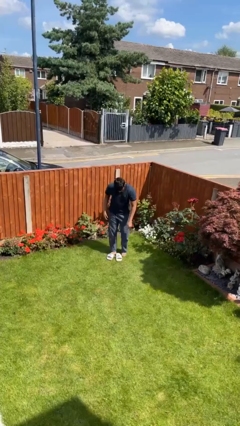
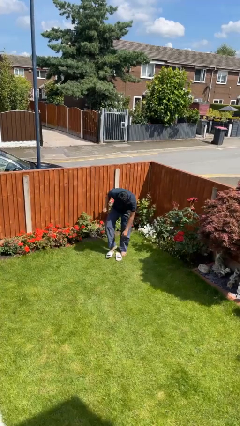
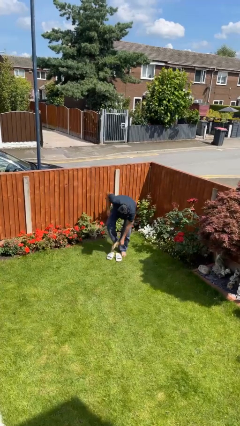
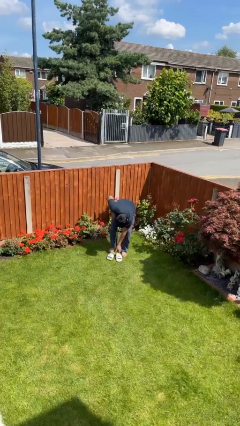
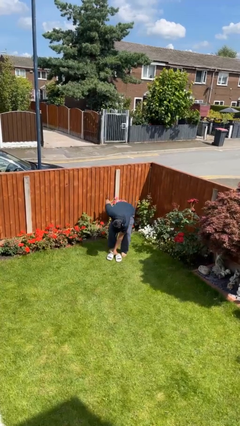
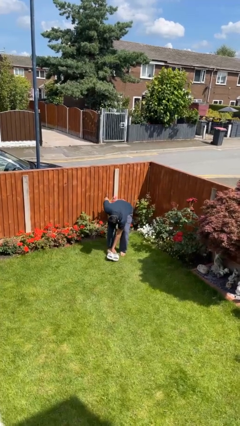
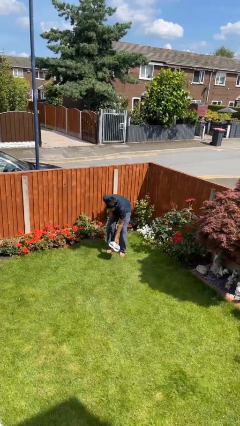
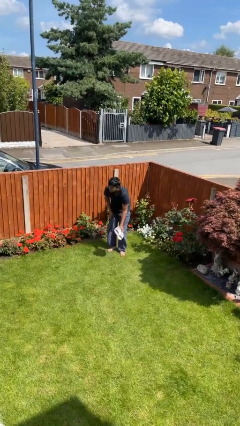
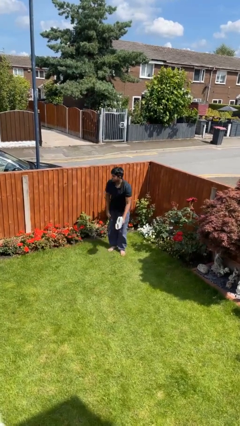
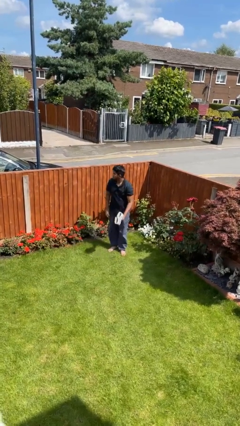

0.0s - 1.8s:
person takes off shoes

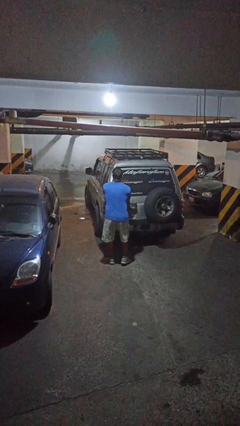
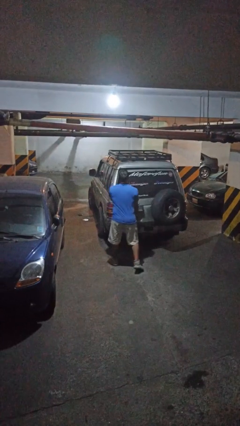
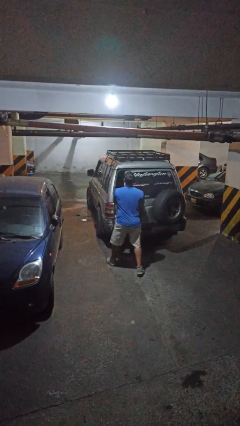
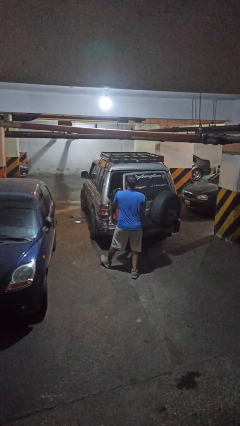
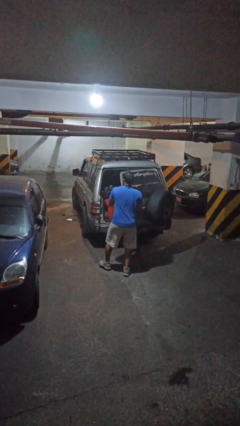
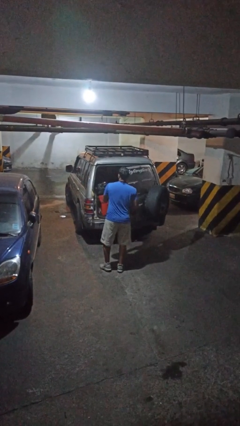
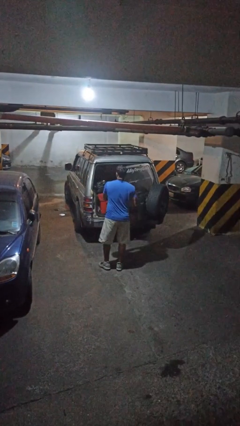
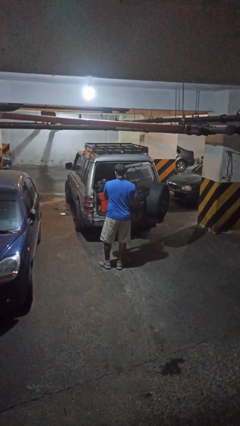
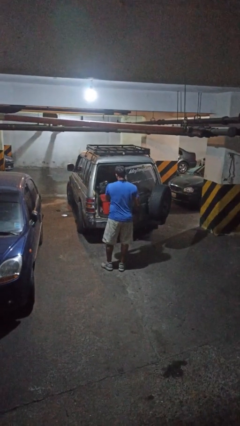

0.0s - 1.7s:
person opens car trunk

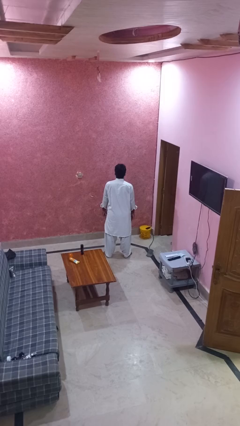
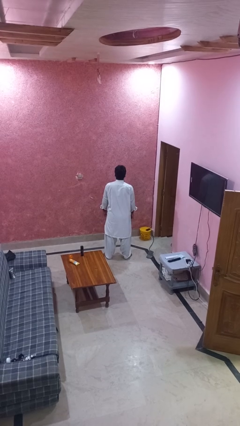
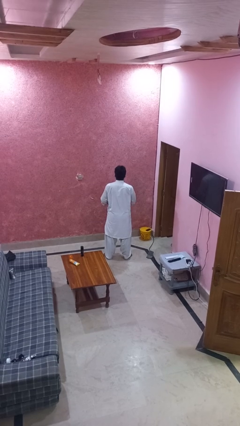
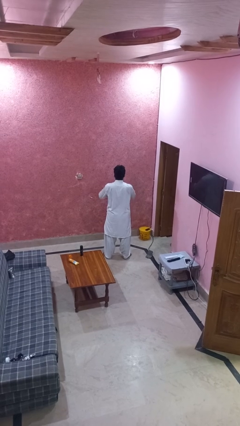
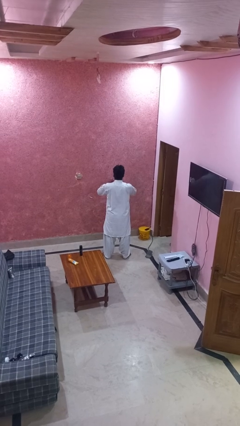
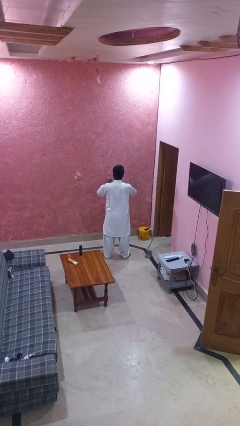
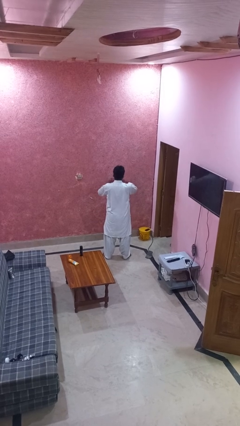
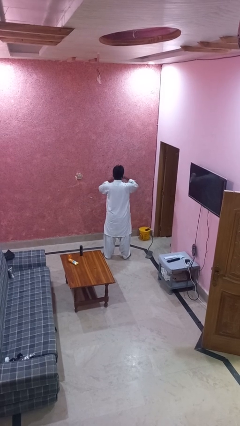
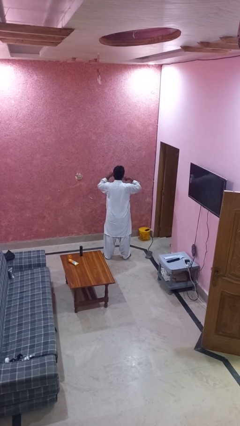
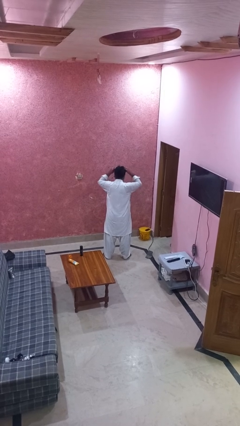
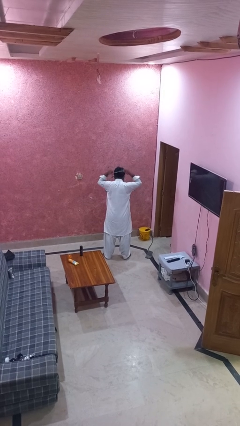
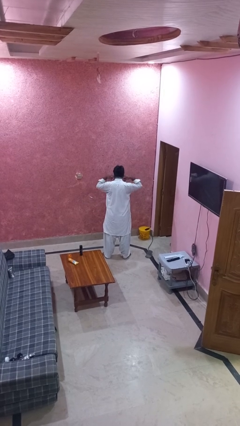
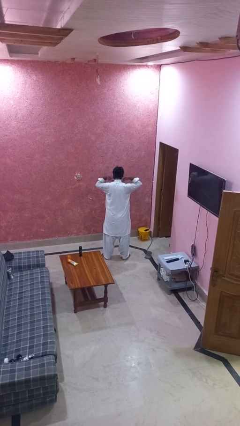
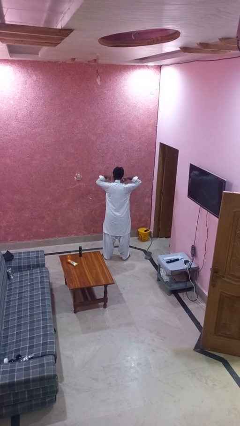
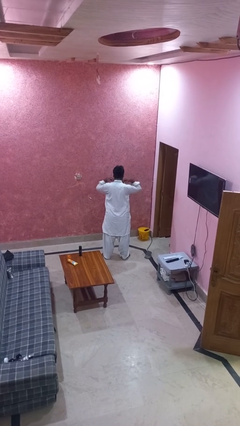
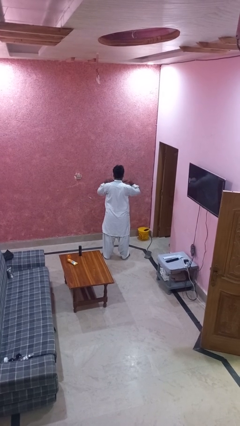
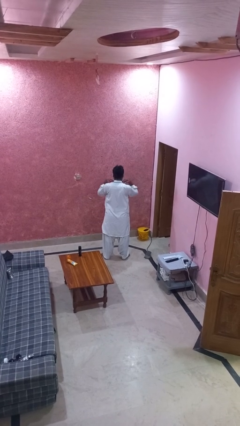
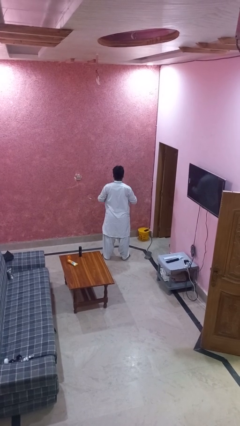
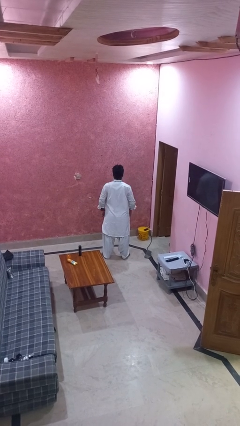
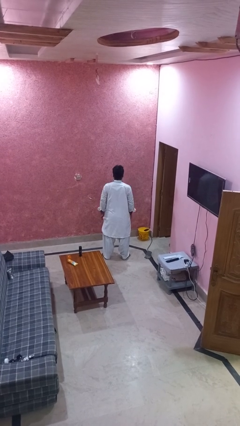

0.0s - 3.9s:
person puts on necklace

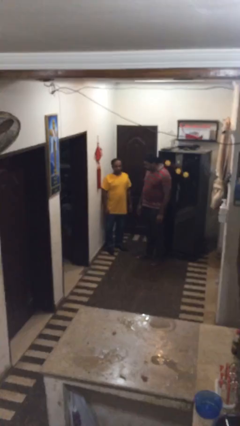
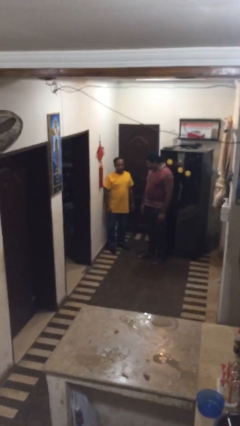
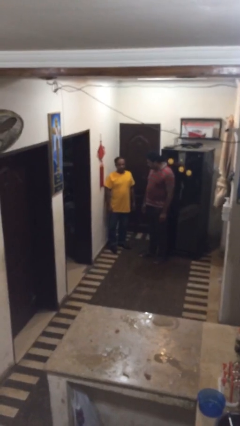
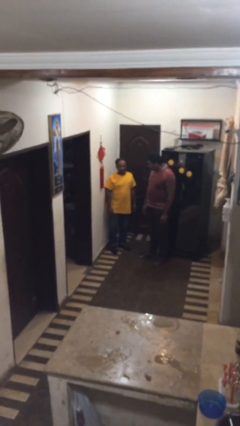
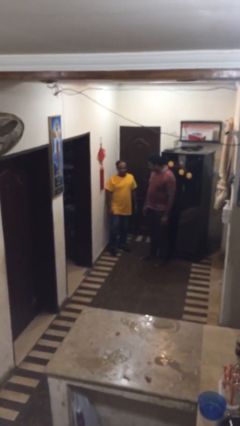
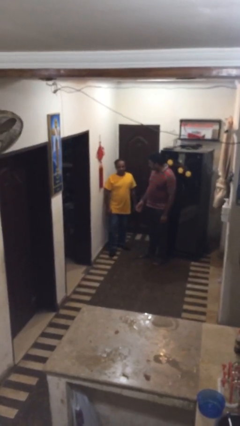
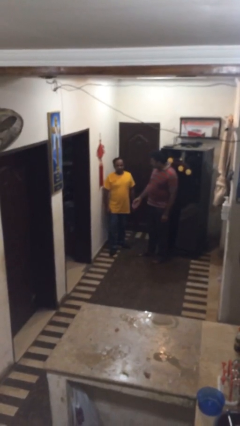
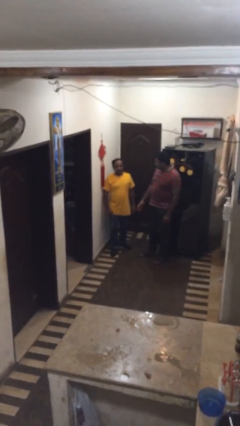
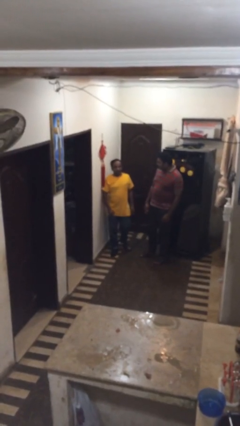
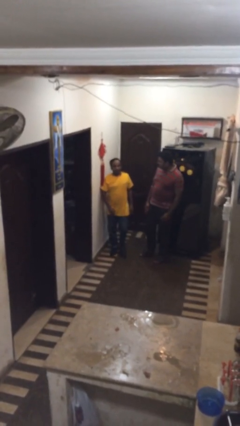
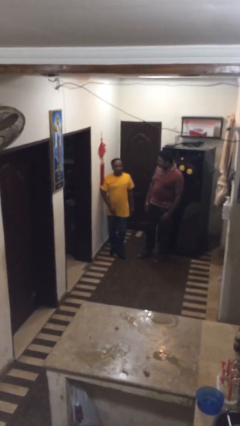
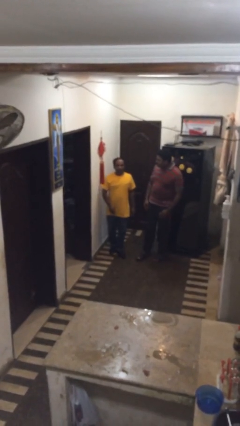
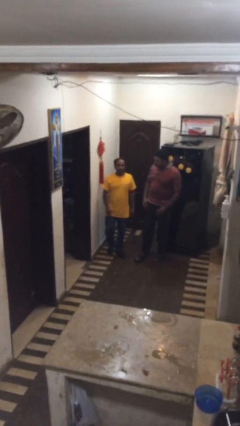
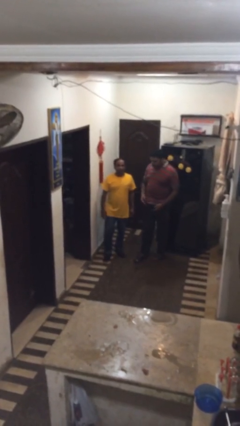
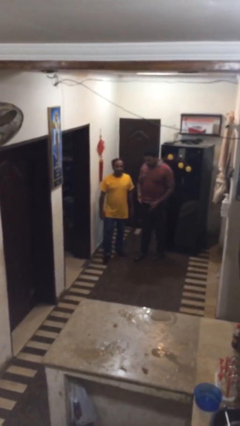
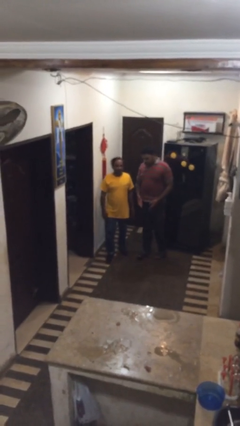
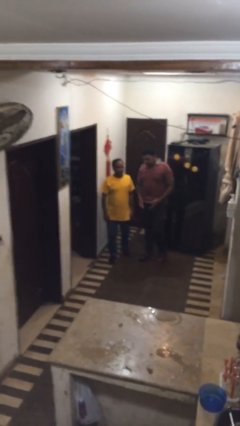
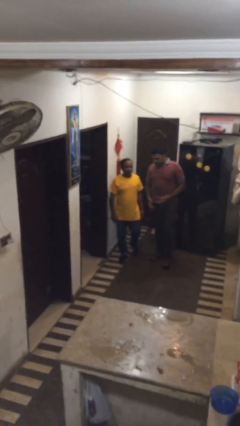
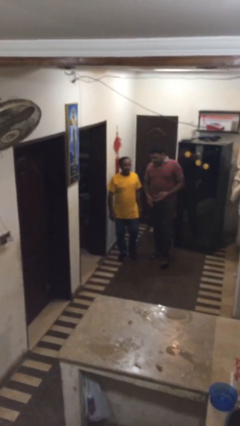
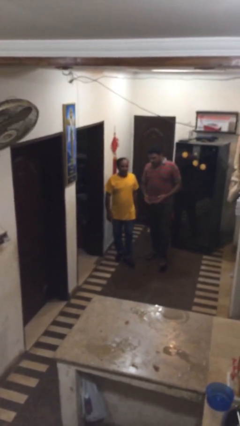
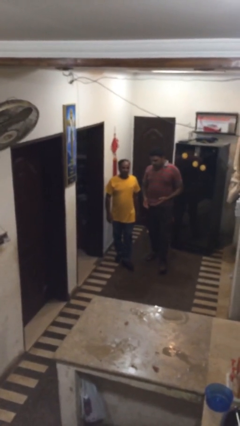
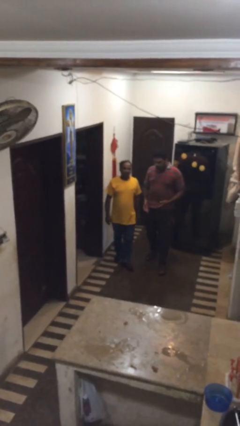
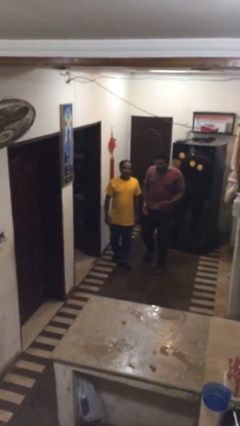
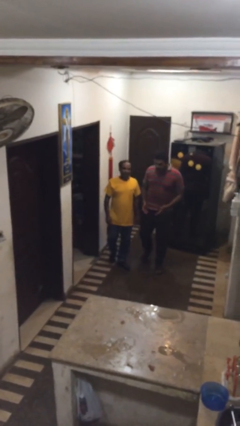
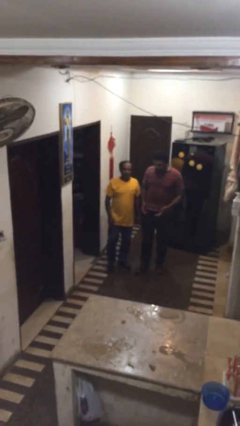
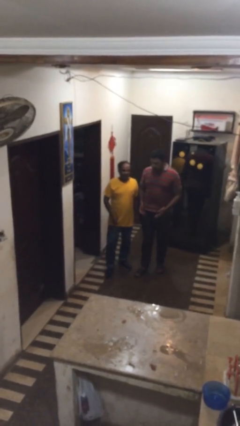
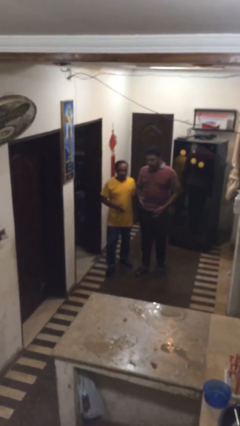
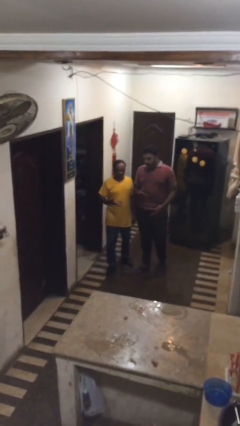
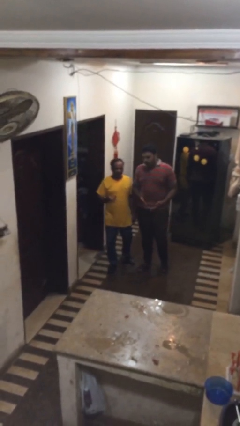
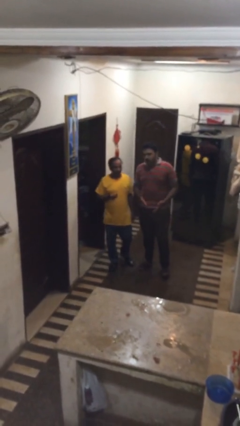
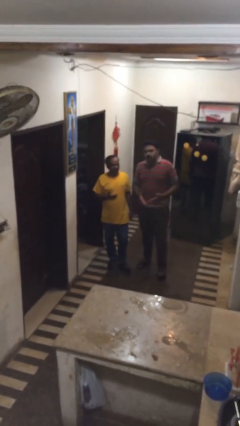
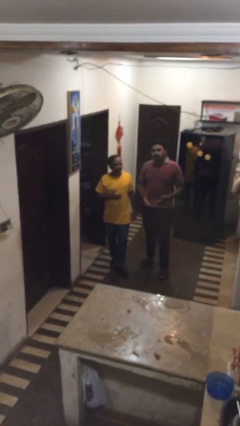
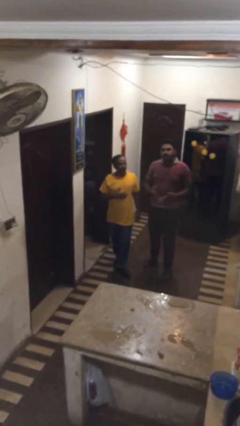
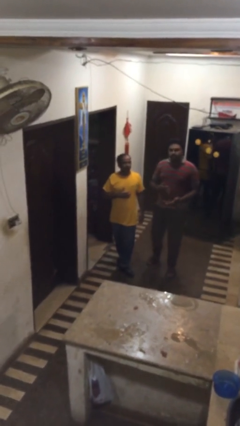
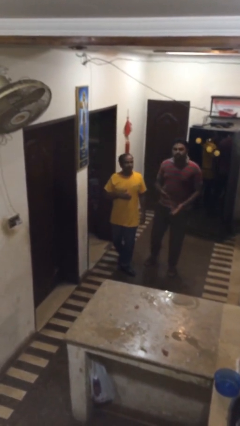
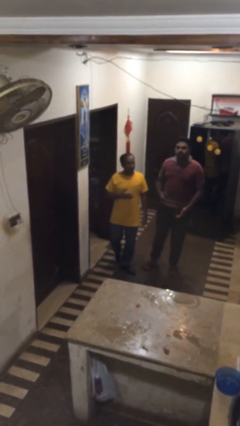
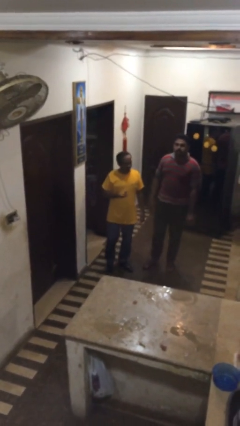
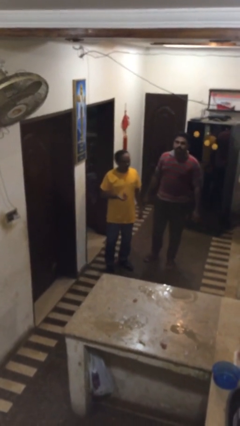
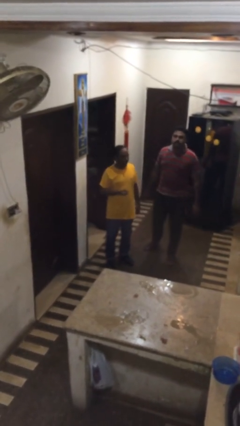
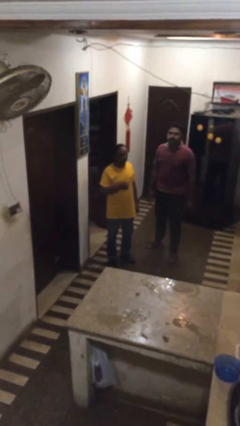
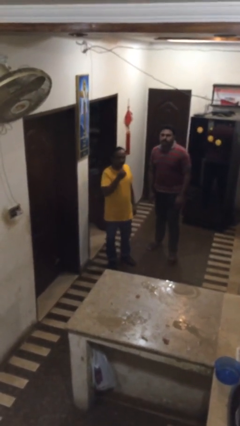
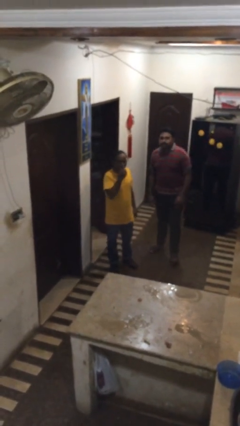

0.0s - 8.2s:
person talks to person

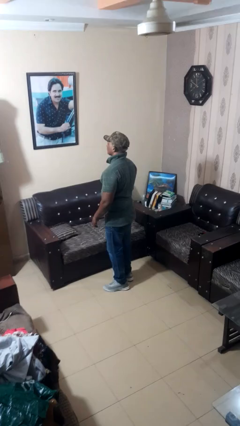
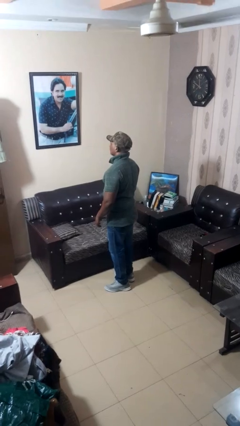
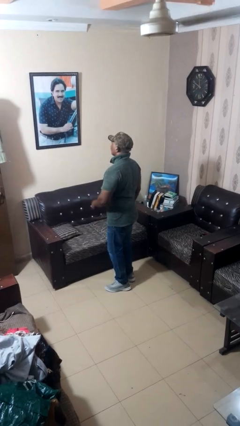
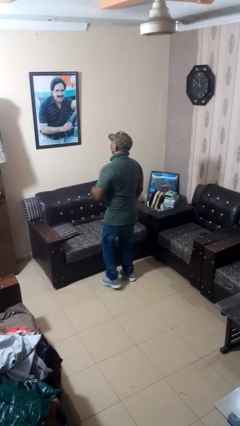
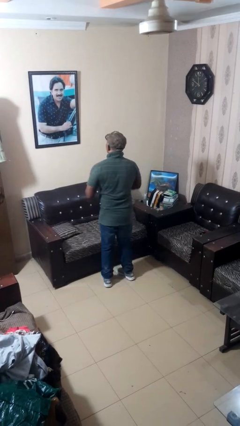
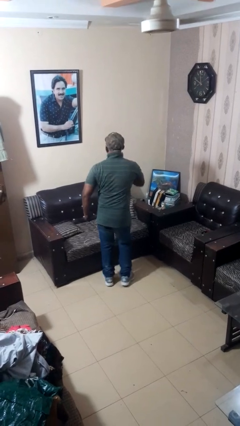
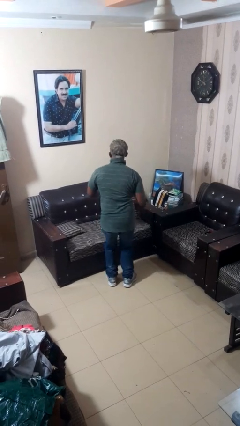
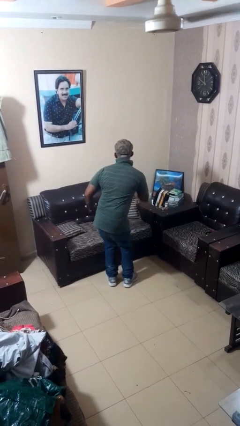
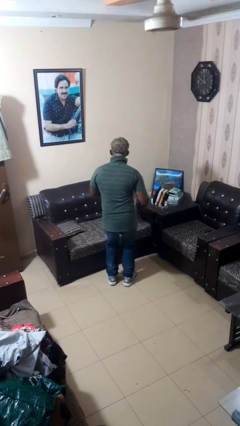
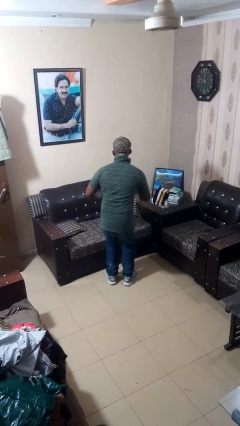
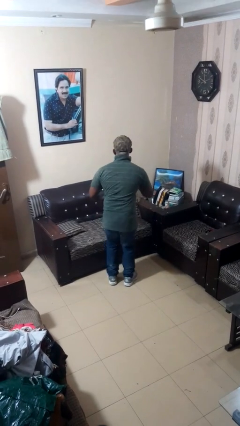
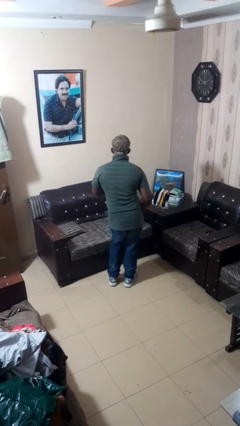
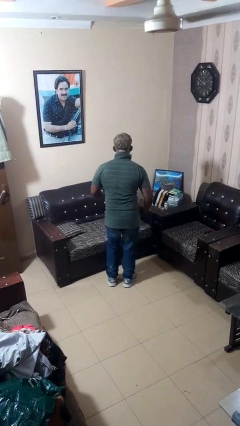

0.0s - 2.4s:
person wiggles hips
